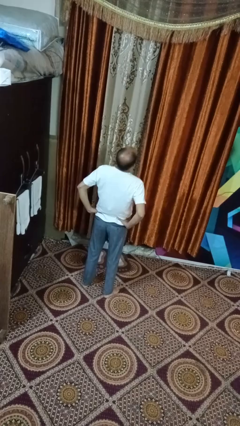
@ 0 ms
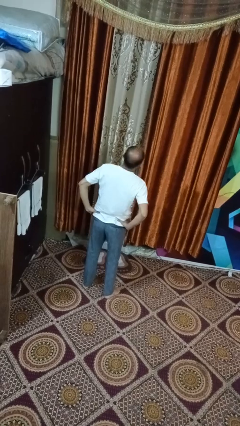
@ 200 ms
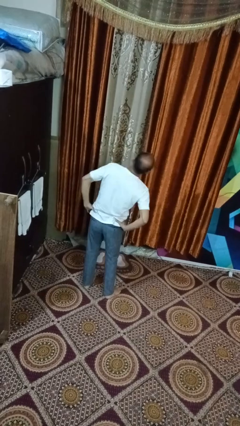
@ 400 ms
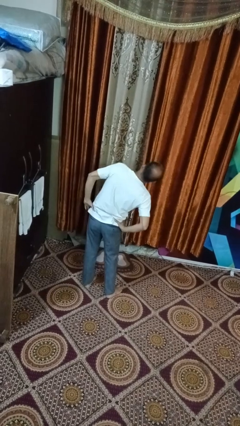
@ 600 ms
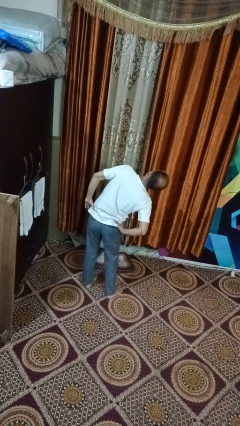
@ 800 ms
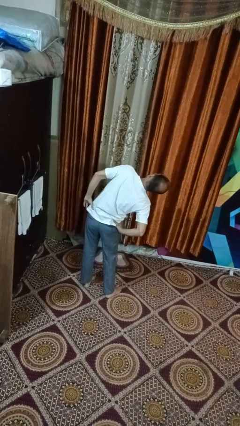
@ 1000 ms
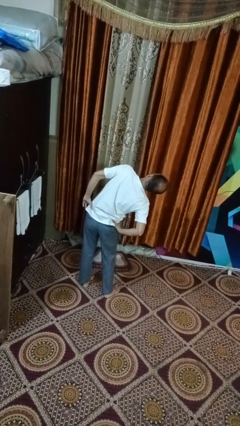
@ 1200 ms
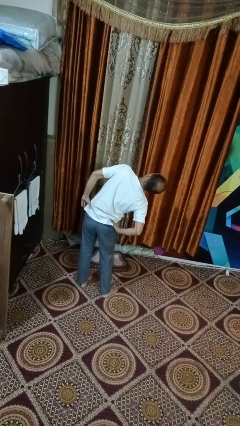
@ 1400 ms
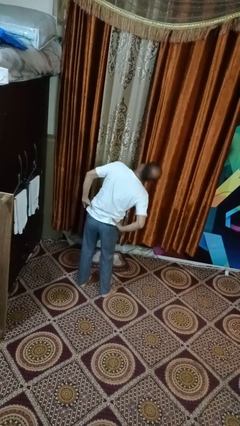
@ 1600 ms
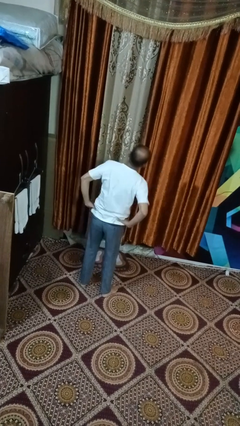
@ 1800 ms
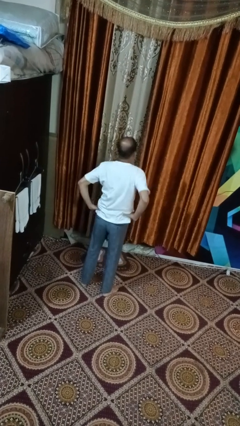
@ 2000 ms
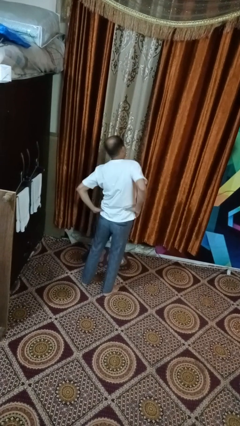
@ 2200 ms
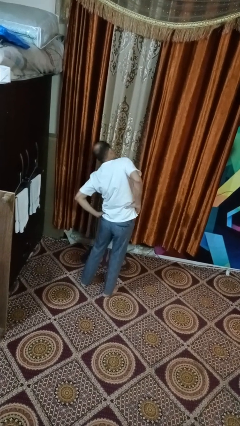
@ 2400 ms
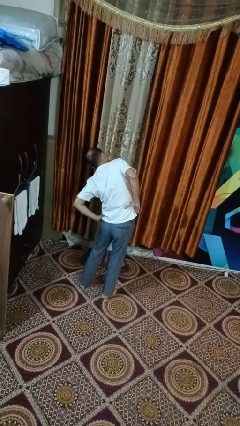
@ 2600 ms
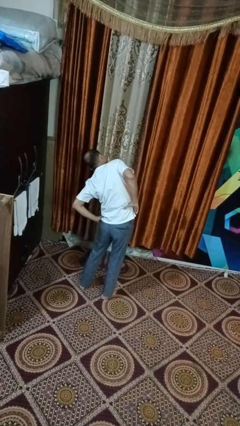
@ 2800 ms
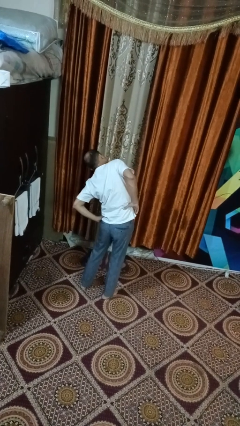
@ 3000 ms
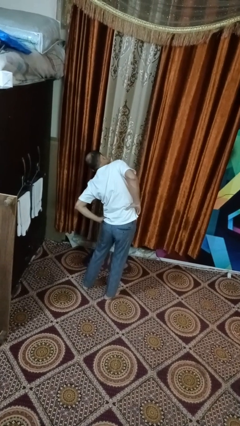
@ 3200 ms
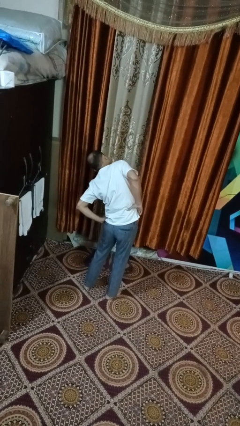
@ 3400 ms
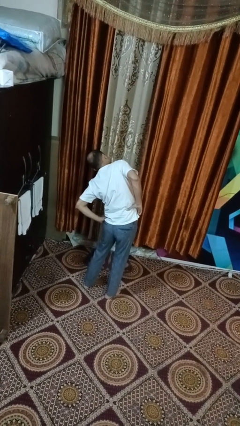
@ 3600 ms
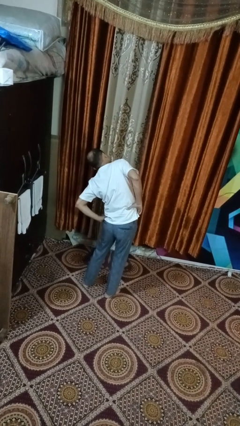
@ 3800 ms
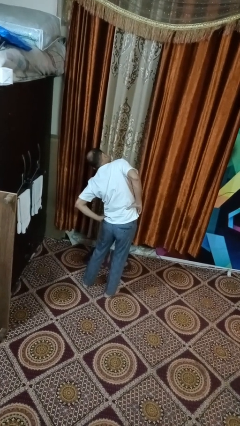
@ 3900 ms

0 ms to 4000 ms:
person stretches arms to side

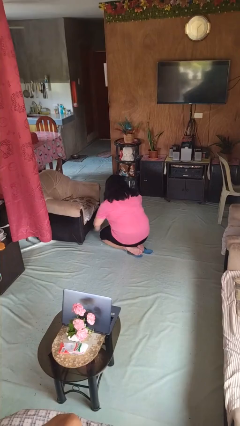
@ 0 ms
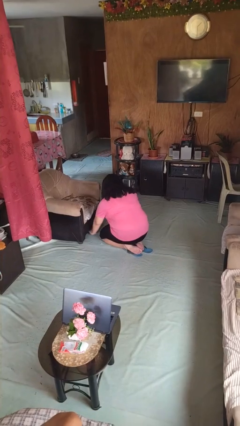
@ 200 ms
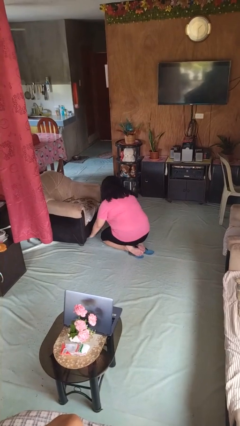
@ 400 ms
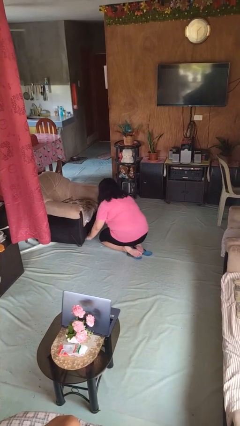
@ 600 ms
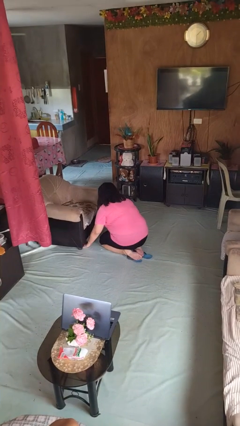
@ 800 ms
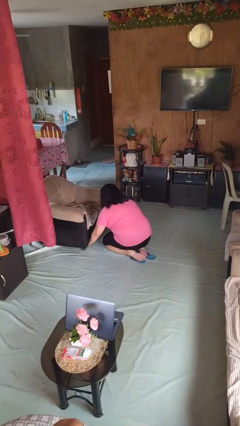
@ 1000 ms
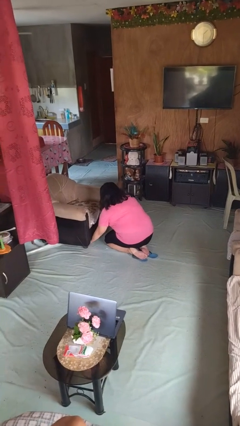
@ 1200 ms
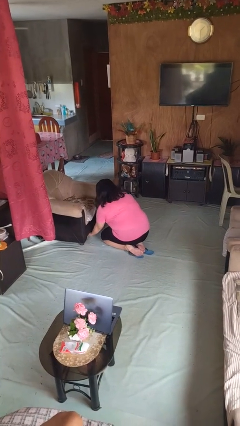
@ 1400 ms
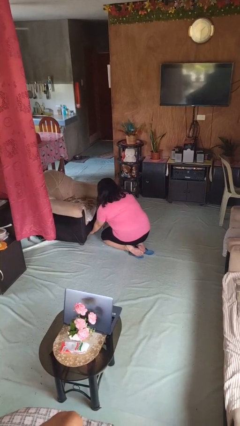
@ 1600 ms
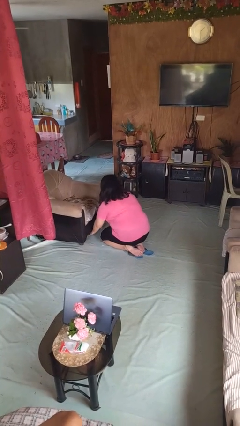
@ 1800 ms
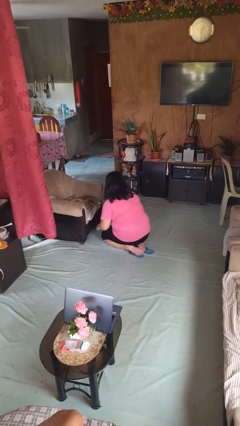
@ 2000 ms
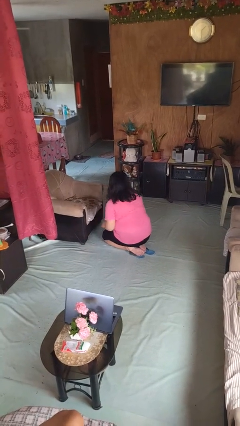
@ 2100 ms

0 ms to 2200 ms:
person searches under couch

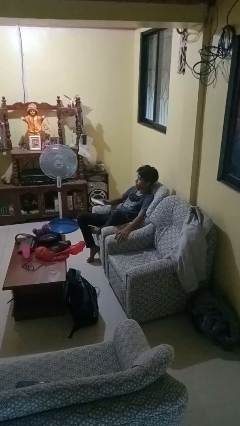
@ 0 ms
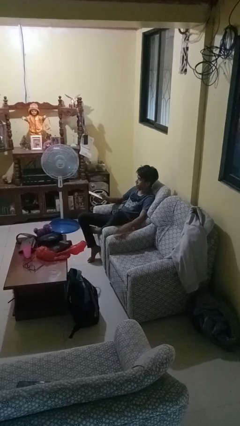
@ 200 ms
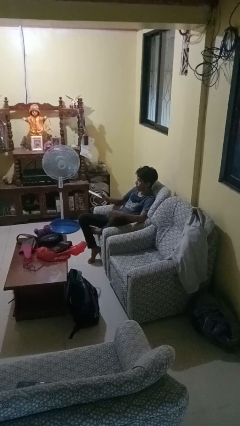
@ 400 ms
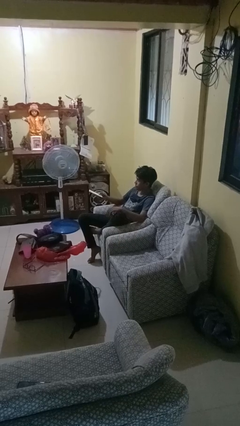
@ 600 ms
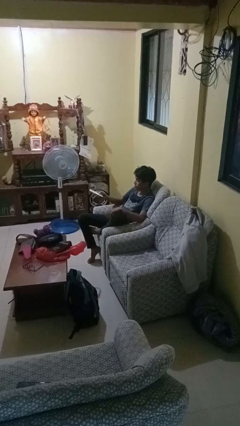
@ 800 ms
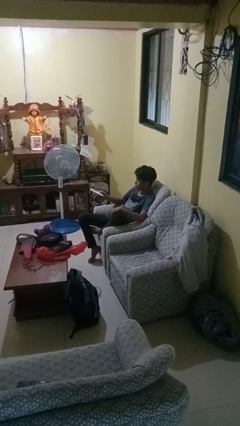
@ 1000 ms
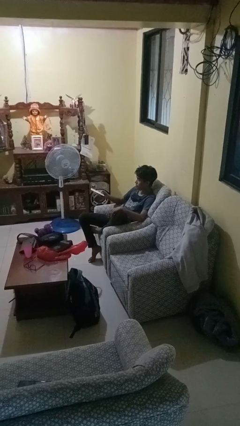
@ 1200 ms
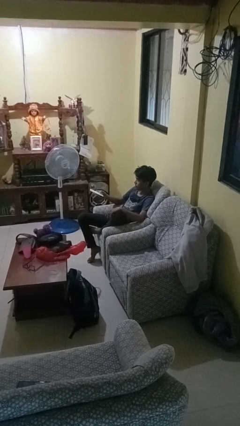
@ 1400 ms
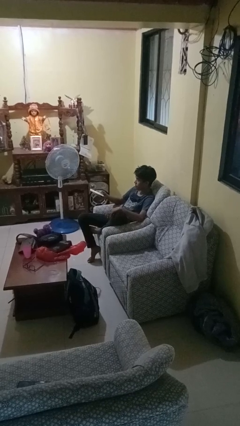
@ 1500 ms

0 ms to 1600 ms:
person uses television remote

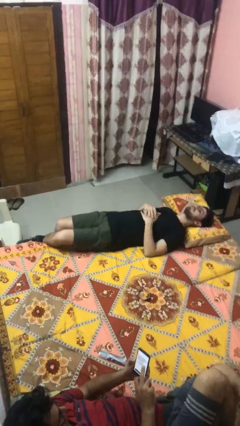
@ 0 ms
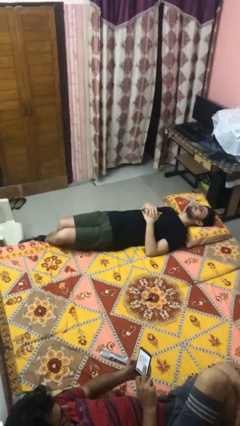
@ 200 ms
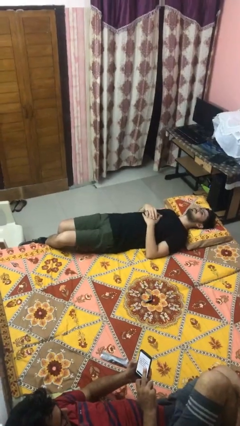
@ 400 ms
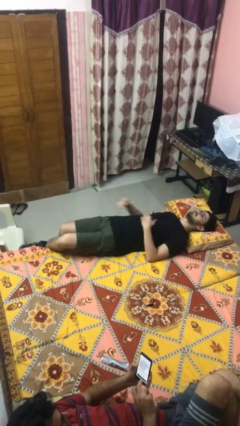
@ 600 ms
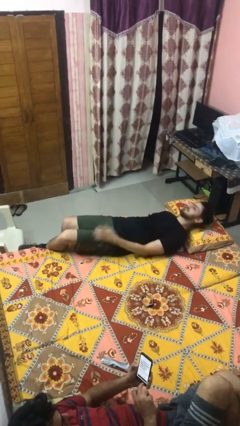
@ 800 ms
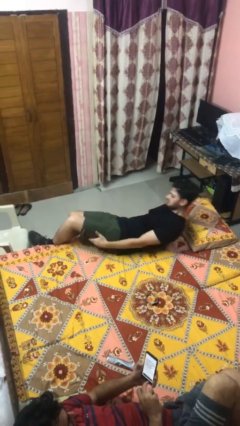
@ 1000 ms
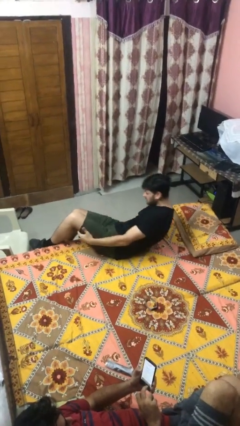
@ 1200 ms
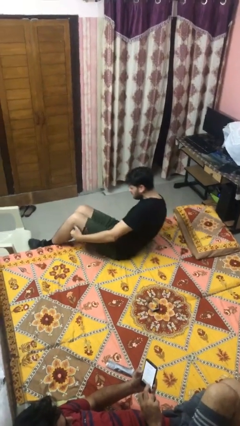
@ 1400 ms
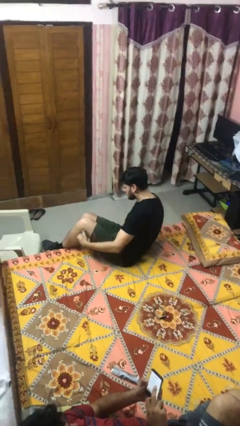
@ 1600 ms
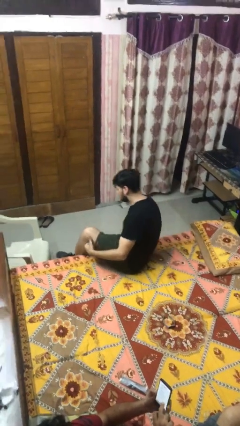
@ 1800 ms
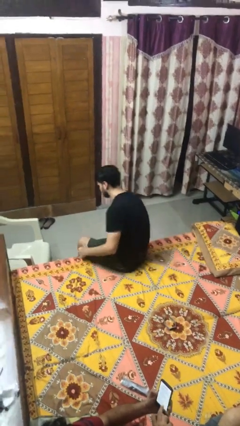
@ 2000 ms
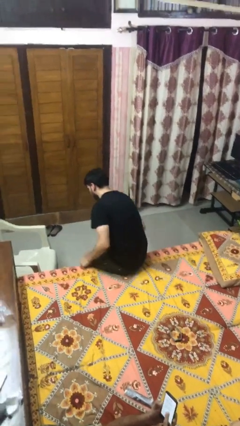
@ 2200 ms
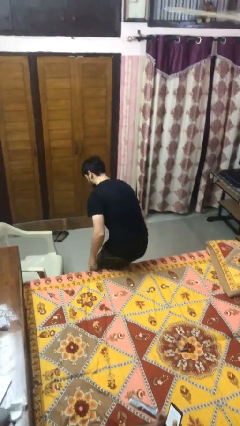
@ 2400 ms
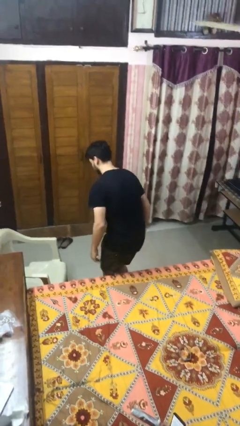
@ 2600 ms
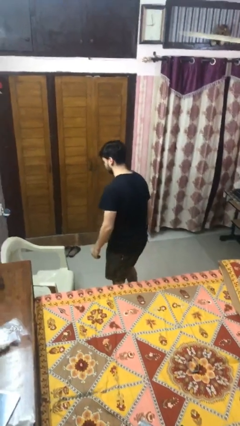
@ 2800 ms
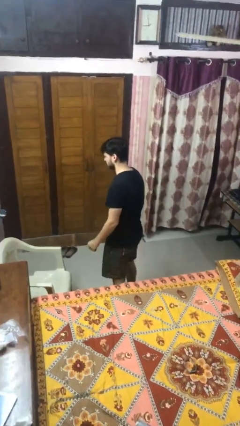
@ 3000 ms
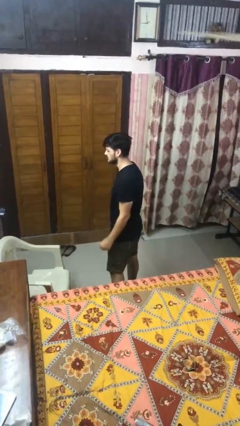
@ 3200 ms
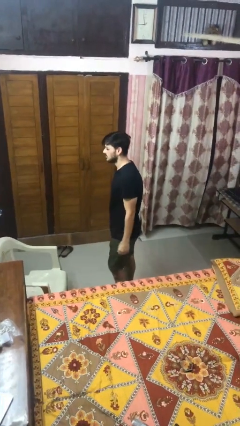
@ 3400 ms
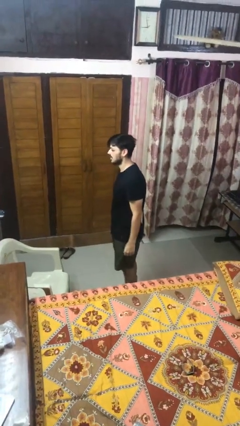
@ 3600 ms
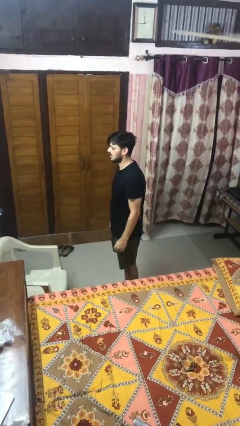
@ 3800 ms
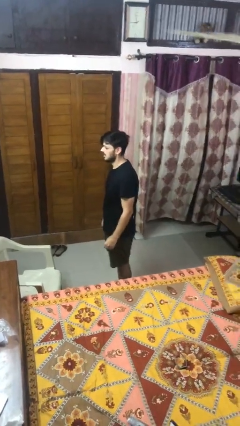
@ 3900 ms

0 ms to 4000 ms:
person stands up

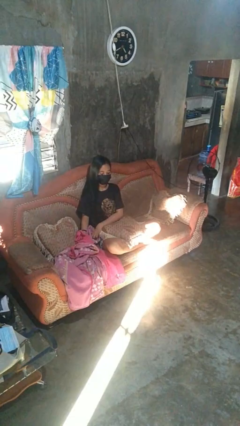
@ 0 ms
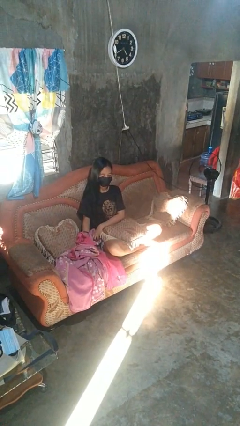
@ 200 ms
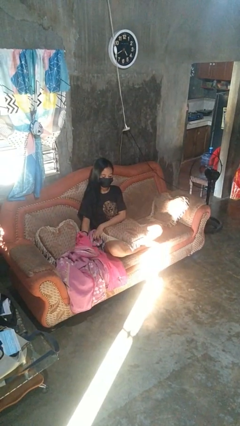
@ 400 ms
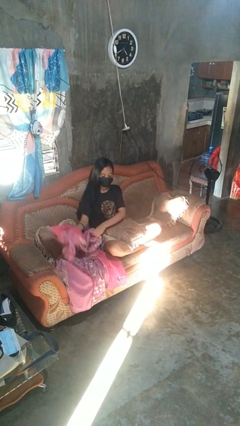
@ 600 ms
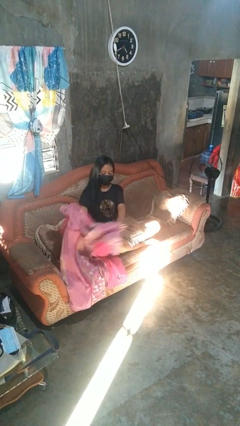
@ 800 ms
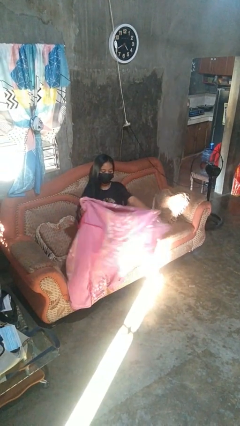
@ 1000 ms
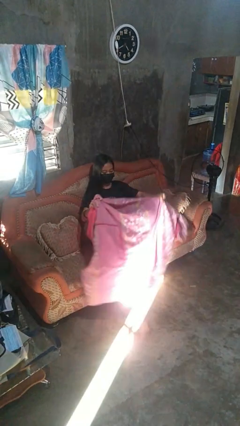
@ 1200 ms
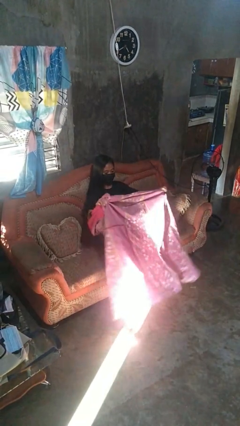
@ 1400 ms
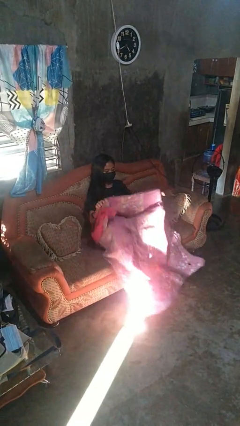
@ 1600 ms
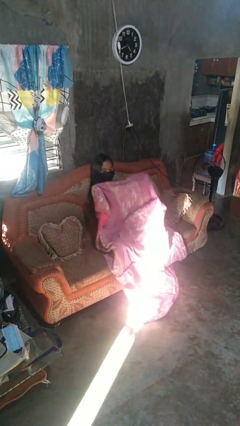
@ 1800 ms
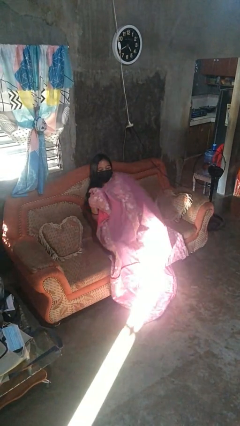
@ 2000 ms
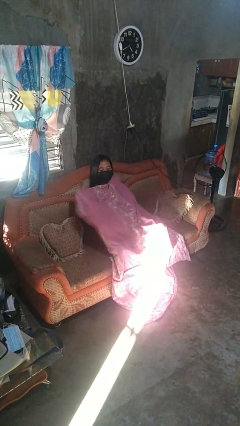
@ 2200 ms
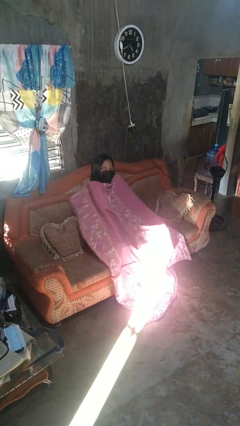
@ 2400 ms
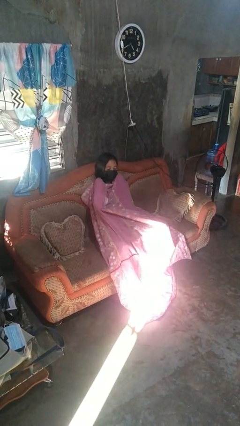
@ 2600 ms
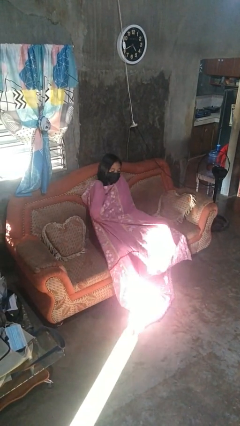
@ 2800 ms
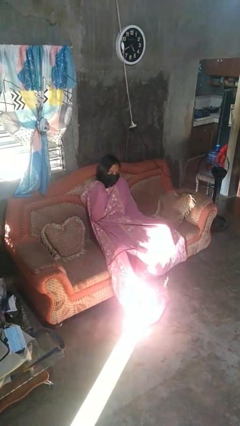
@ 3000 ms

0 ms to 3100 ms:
person covers with blanket

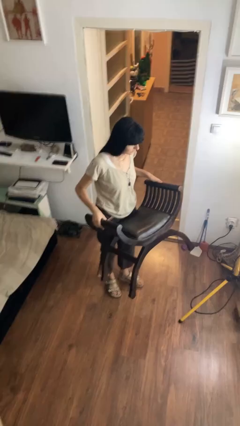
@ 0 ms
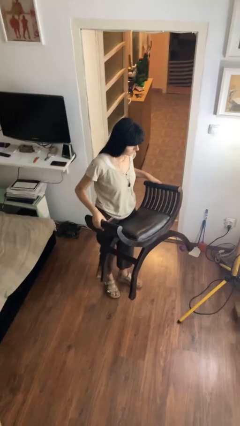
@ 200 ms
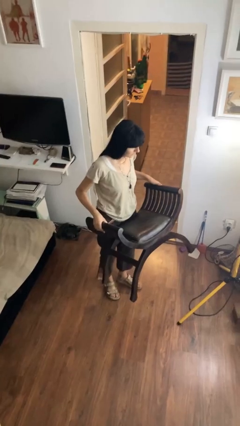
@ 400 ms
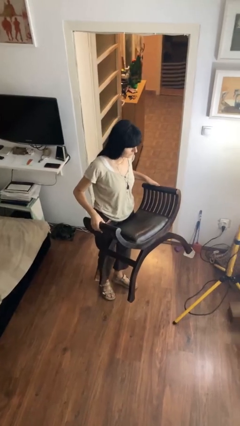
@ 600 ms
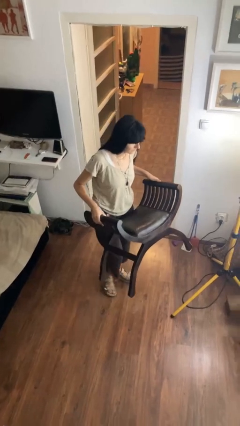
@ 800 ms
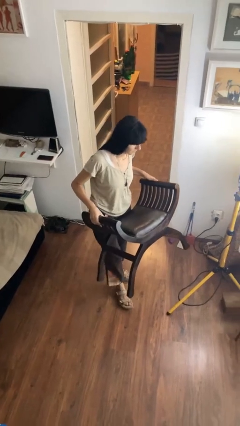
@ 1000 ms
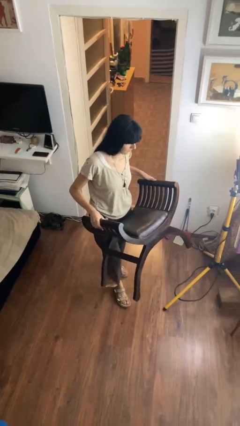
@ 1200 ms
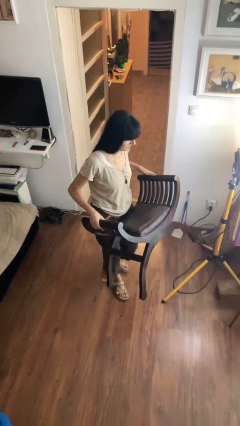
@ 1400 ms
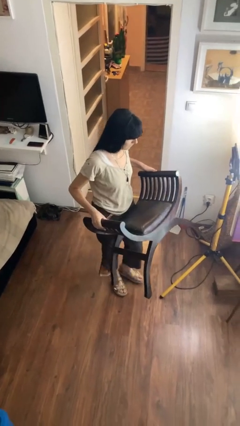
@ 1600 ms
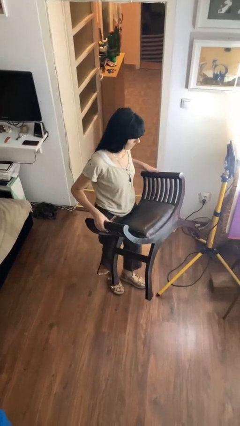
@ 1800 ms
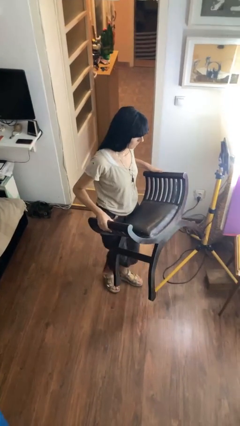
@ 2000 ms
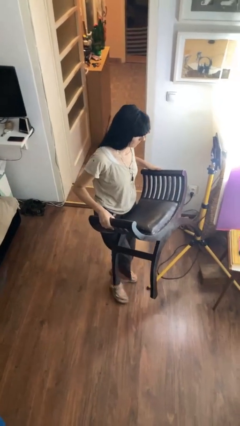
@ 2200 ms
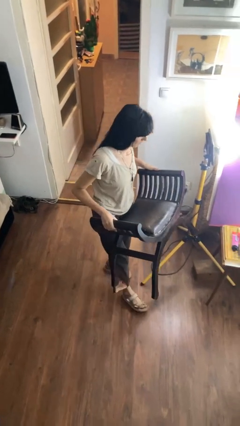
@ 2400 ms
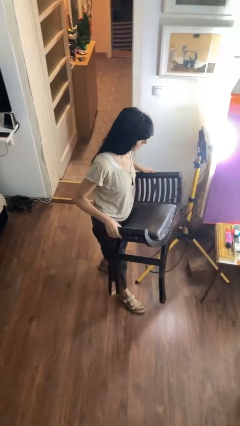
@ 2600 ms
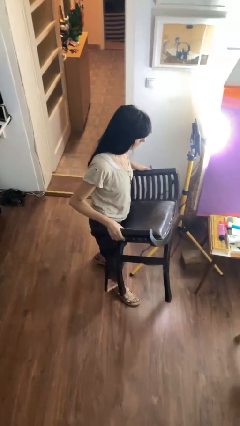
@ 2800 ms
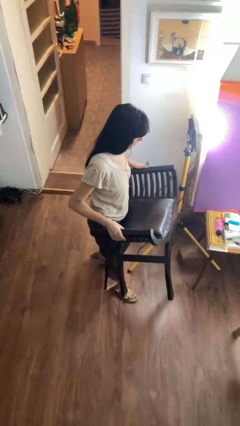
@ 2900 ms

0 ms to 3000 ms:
person carries furniture
